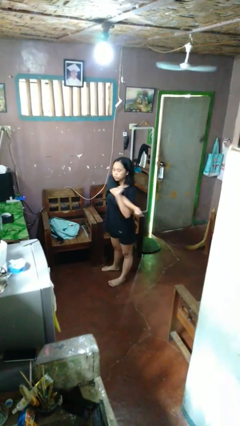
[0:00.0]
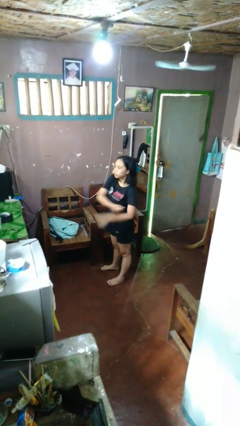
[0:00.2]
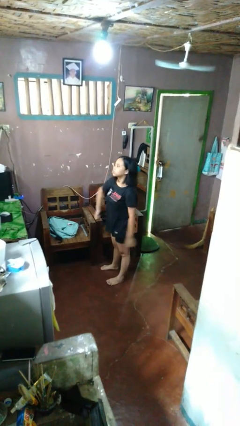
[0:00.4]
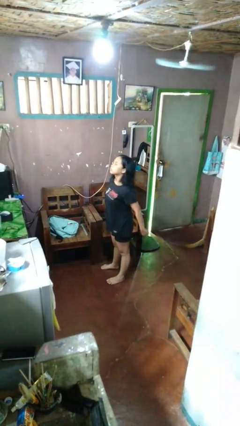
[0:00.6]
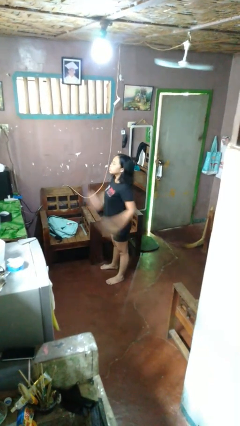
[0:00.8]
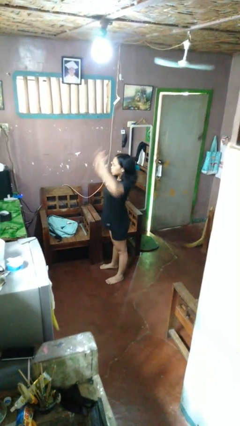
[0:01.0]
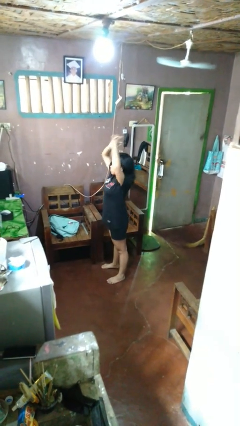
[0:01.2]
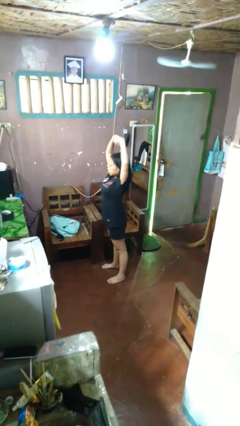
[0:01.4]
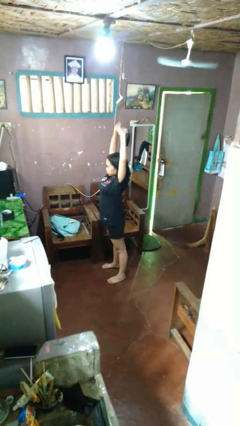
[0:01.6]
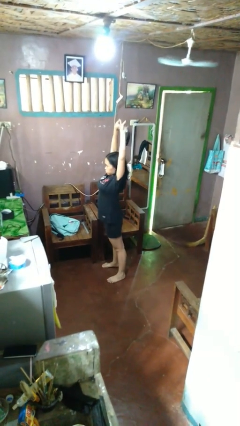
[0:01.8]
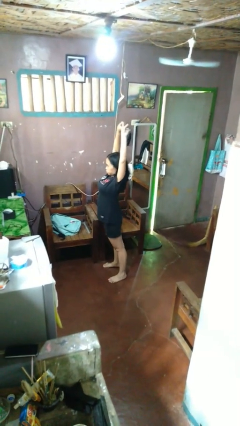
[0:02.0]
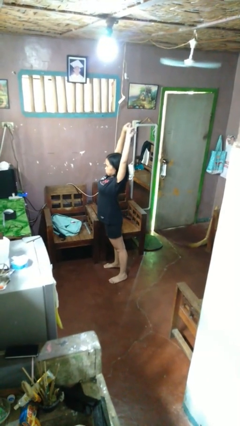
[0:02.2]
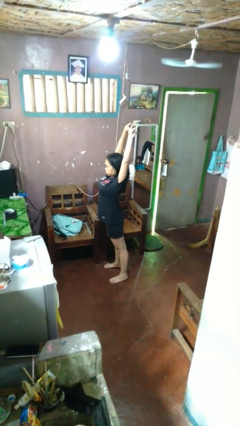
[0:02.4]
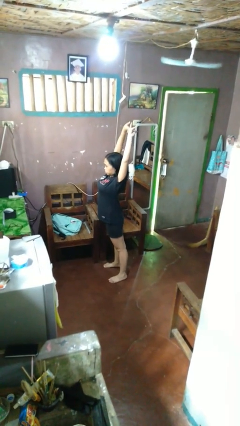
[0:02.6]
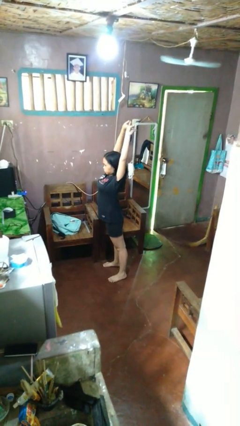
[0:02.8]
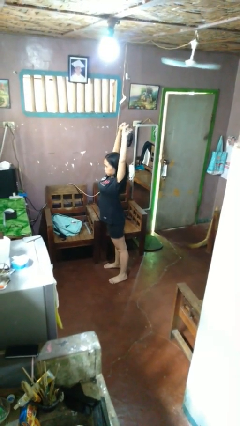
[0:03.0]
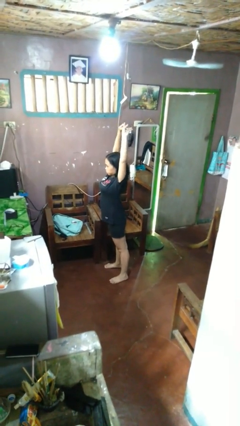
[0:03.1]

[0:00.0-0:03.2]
person stretches arms over head

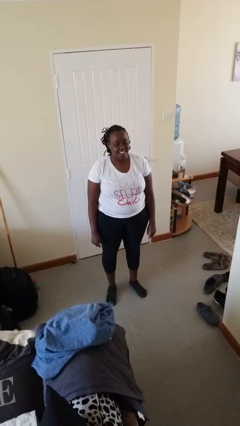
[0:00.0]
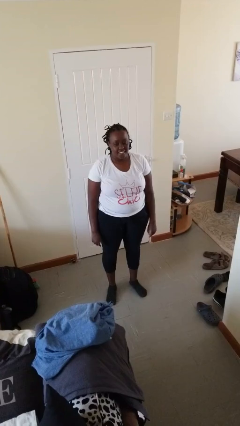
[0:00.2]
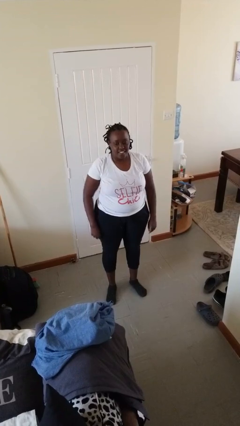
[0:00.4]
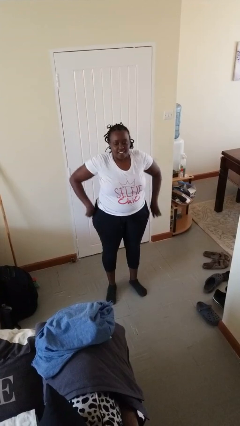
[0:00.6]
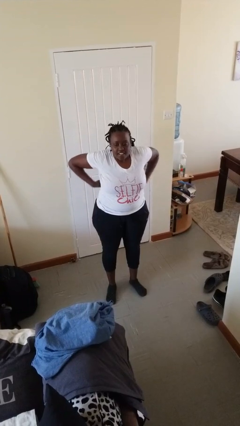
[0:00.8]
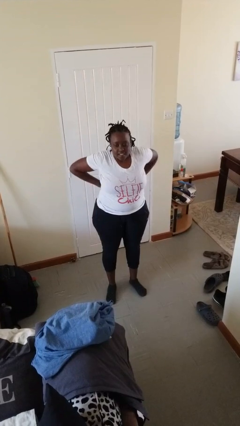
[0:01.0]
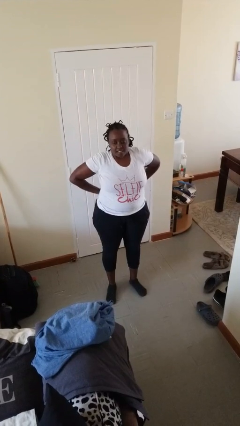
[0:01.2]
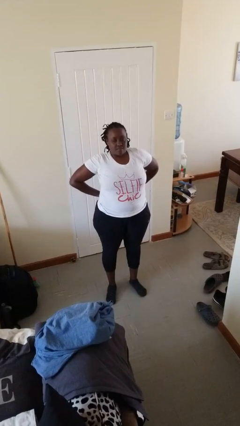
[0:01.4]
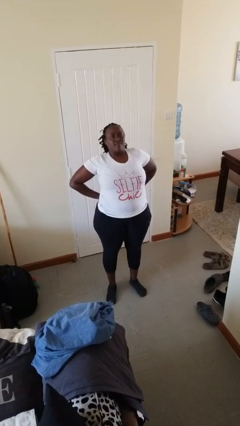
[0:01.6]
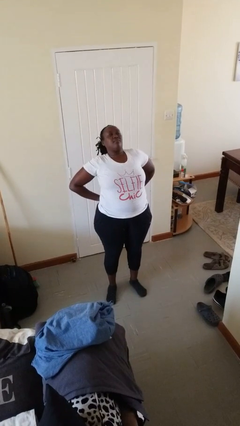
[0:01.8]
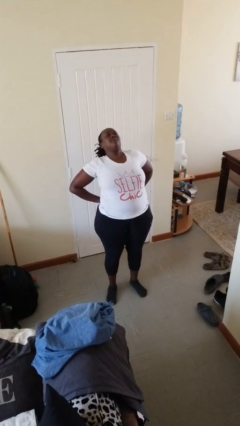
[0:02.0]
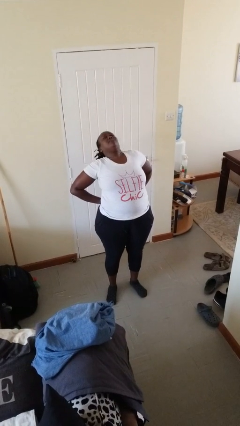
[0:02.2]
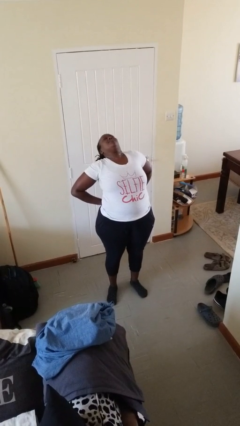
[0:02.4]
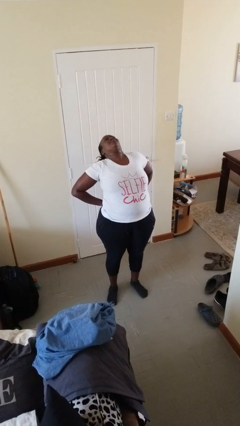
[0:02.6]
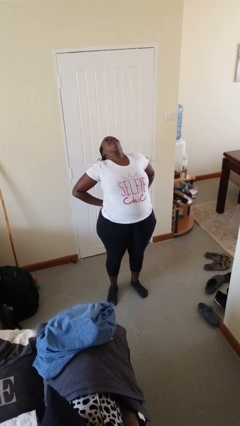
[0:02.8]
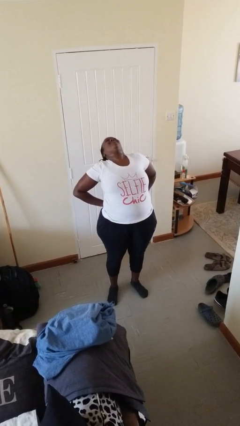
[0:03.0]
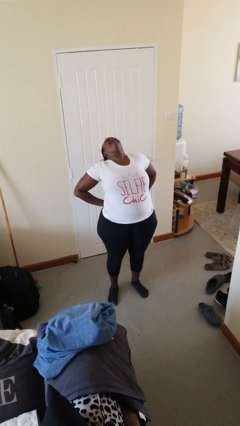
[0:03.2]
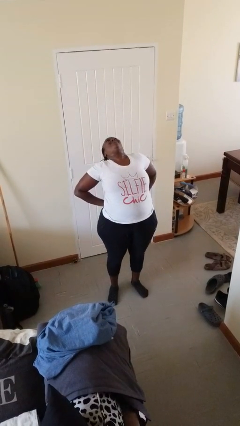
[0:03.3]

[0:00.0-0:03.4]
person stretches back

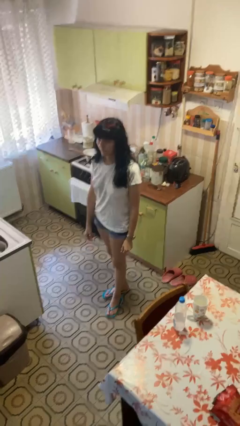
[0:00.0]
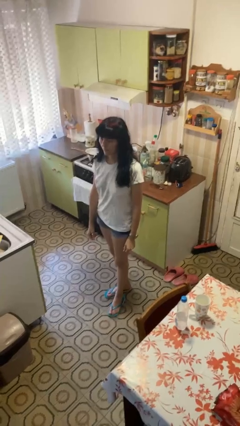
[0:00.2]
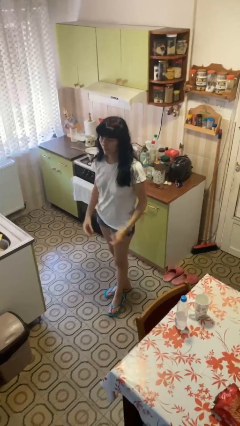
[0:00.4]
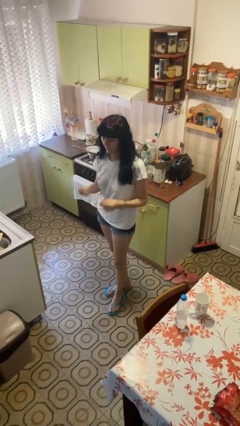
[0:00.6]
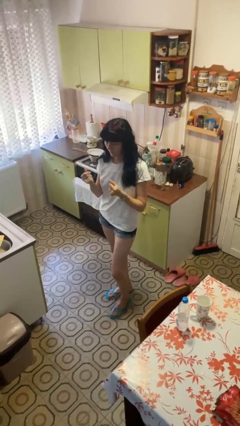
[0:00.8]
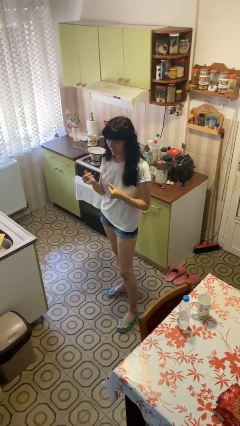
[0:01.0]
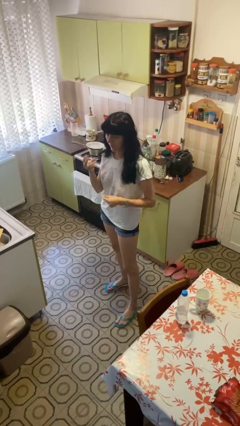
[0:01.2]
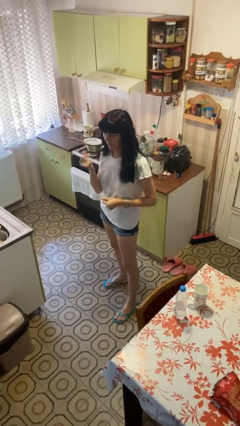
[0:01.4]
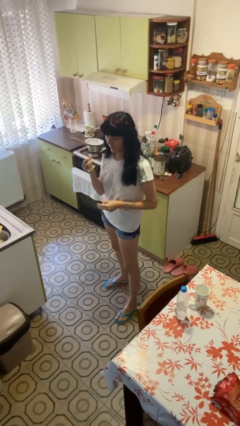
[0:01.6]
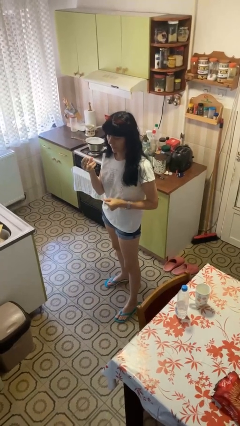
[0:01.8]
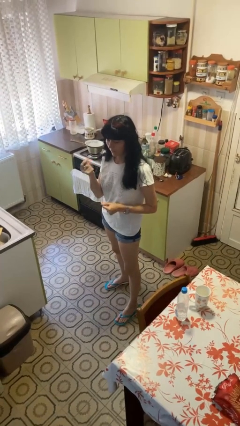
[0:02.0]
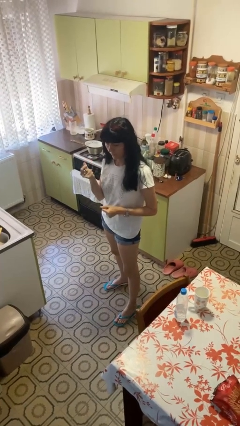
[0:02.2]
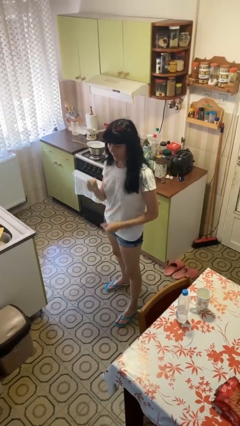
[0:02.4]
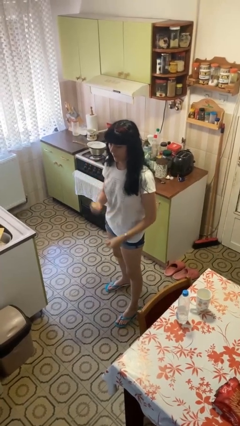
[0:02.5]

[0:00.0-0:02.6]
person snaps fingers

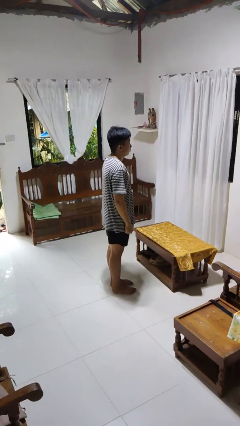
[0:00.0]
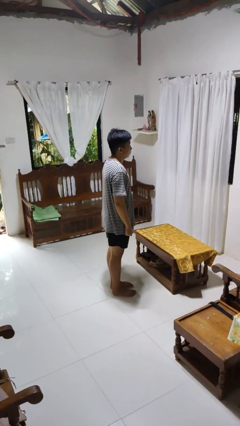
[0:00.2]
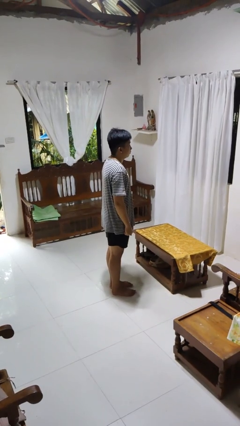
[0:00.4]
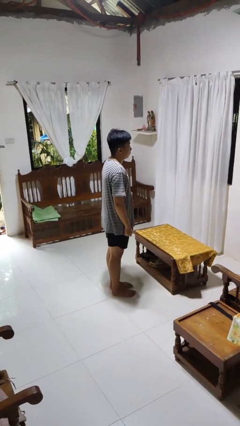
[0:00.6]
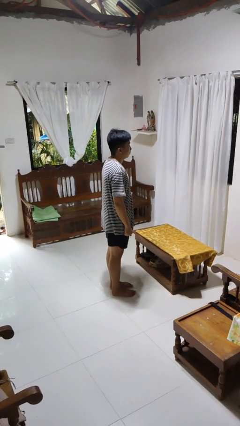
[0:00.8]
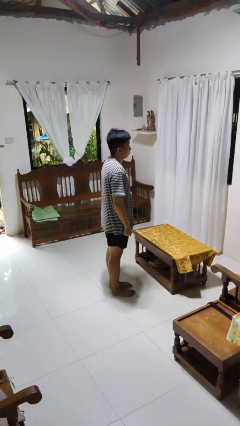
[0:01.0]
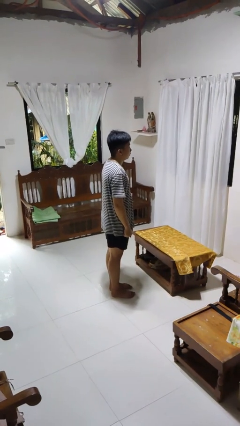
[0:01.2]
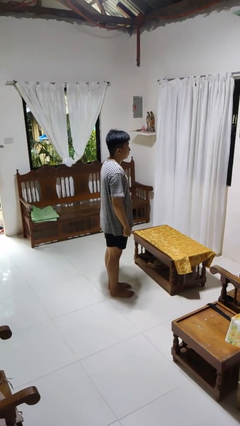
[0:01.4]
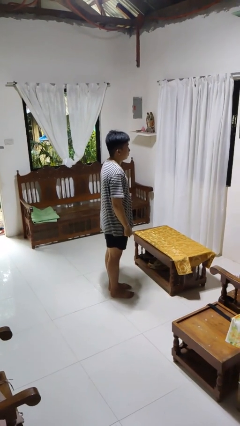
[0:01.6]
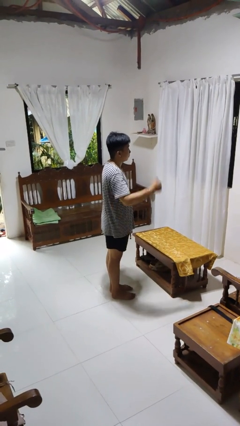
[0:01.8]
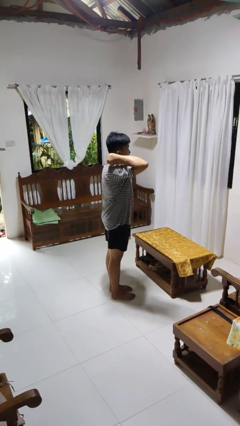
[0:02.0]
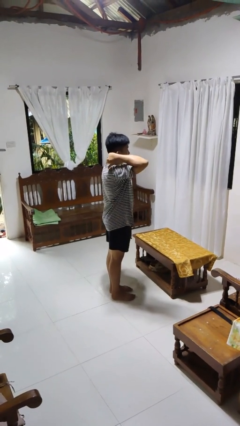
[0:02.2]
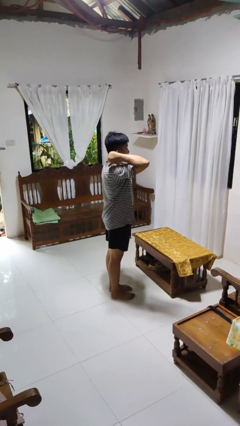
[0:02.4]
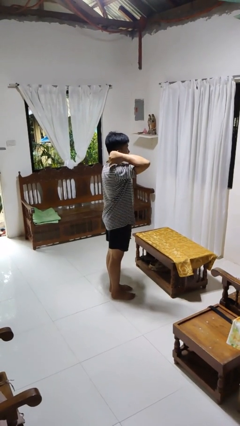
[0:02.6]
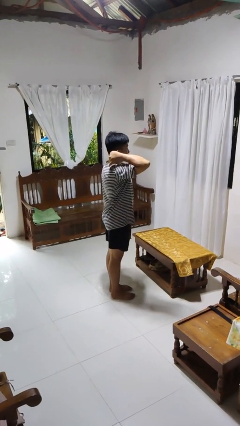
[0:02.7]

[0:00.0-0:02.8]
person gestures behind me

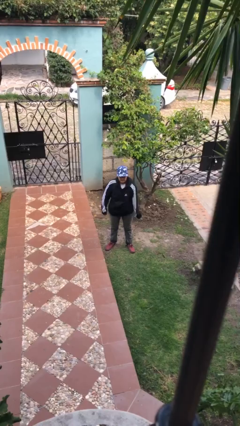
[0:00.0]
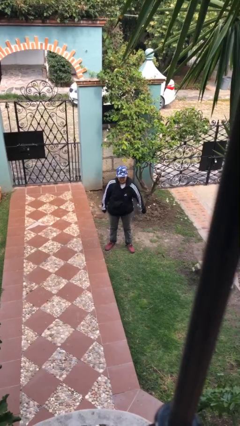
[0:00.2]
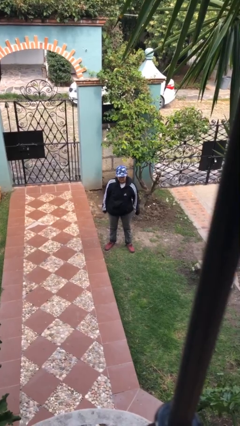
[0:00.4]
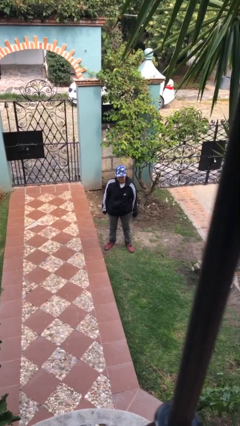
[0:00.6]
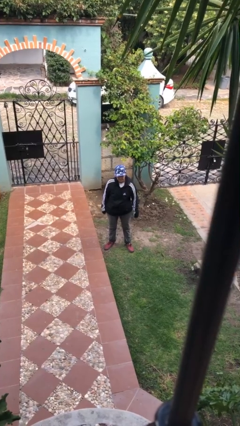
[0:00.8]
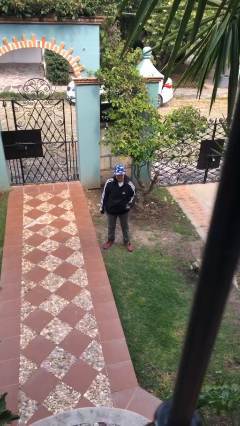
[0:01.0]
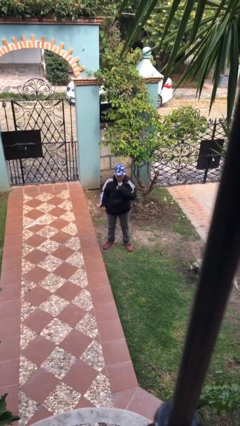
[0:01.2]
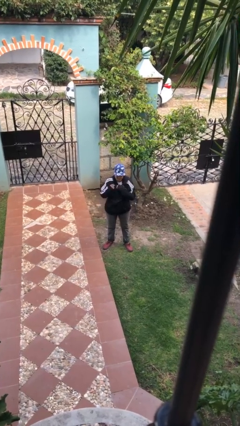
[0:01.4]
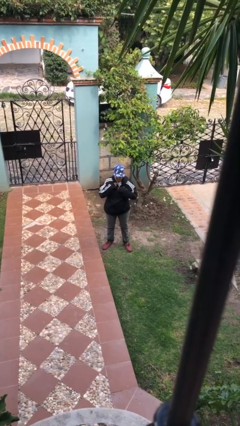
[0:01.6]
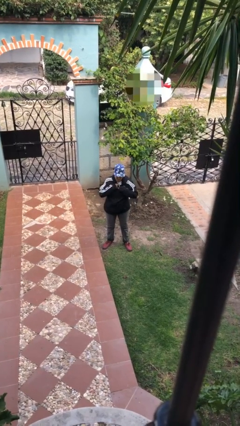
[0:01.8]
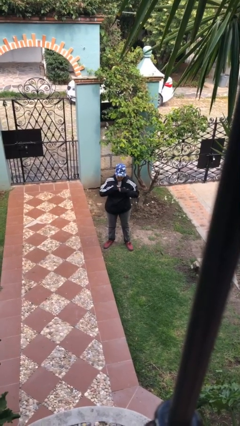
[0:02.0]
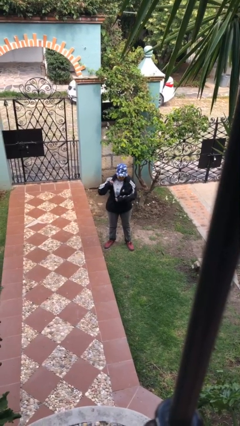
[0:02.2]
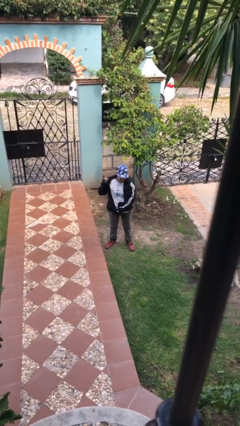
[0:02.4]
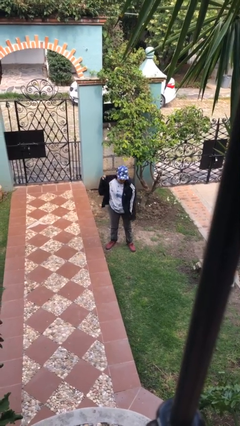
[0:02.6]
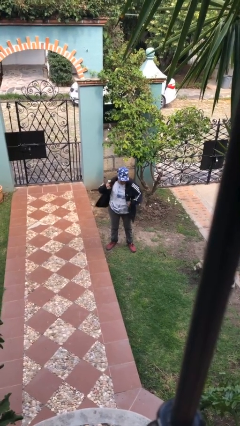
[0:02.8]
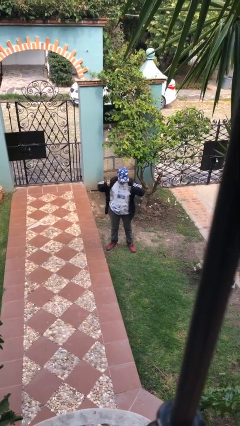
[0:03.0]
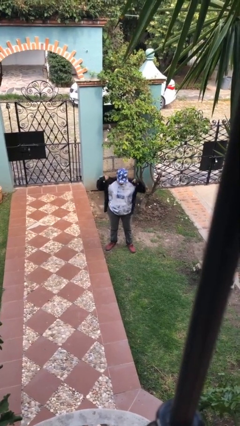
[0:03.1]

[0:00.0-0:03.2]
person unzips jacket

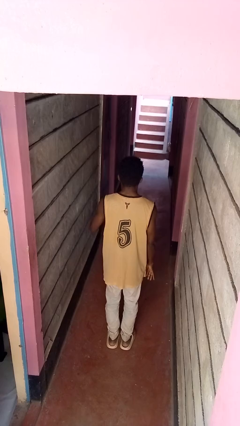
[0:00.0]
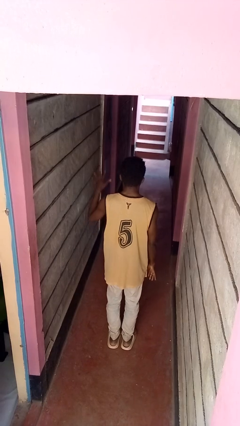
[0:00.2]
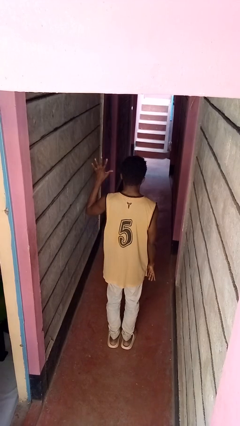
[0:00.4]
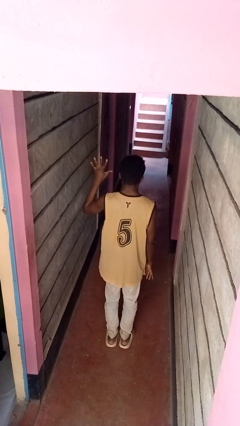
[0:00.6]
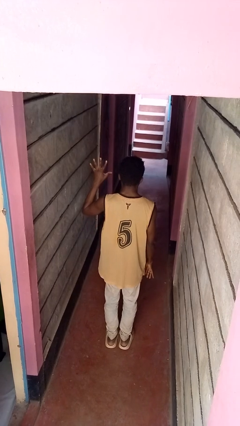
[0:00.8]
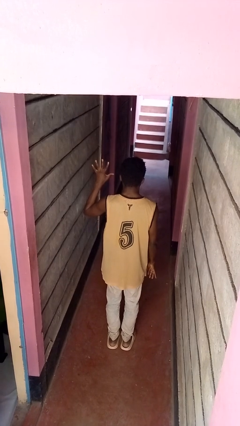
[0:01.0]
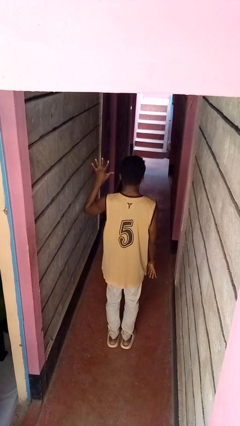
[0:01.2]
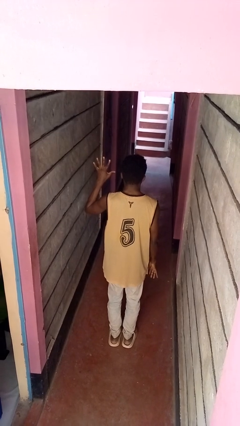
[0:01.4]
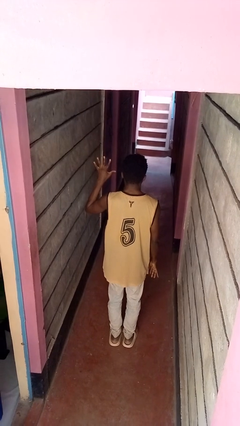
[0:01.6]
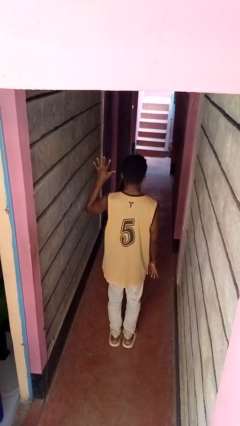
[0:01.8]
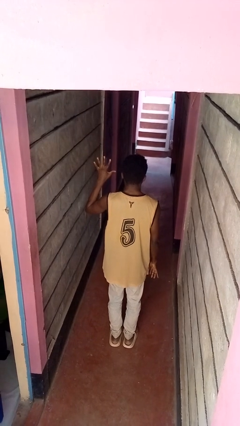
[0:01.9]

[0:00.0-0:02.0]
person gestures number five
